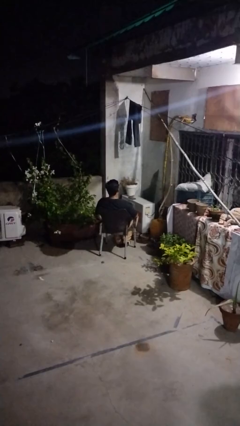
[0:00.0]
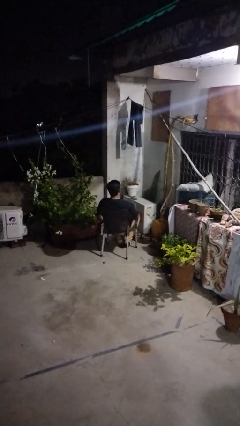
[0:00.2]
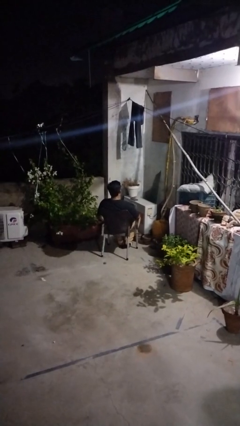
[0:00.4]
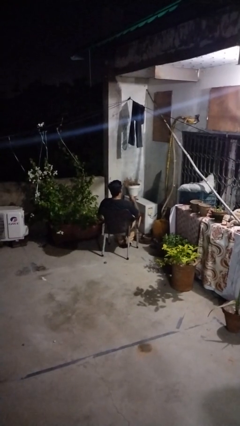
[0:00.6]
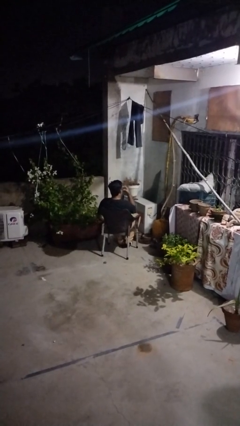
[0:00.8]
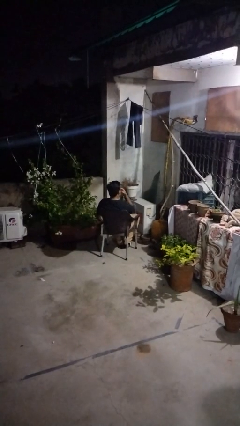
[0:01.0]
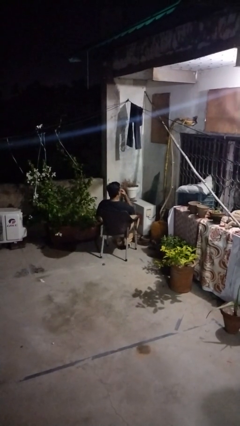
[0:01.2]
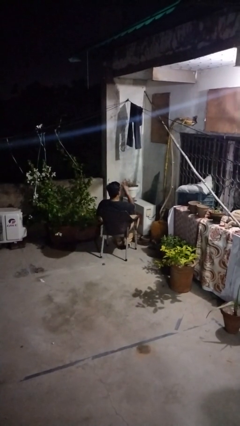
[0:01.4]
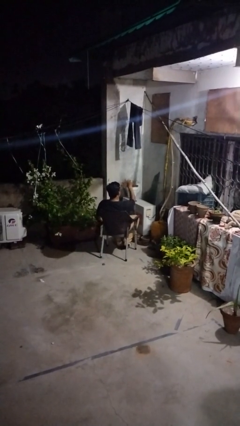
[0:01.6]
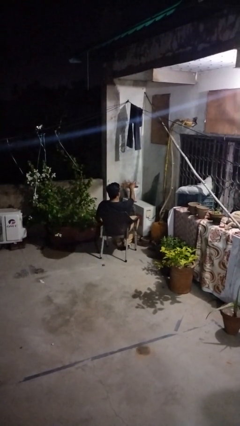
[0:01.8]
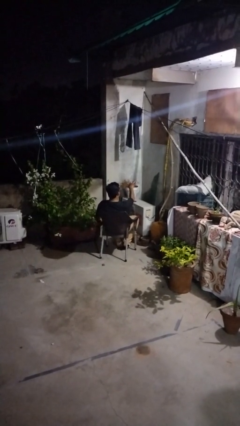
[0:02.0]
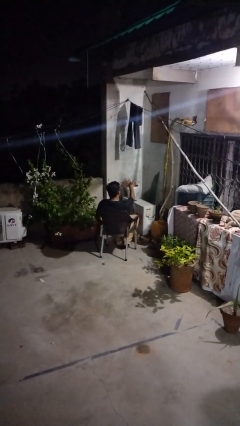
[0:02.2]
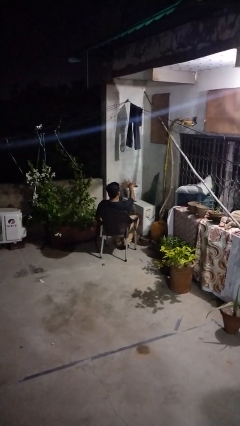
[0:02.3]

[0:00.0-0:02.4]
person gestures watch closely

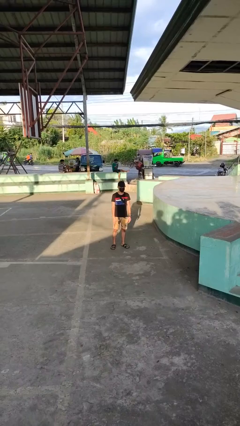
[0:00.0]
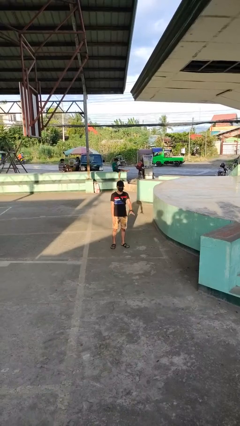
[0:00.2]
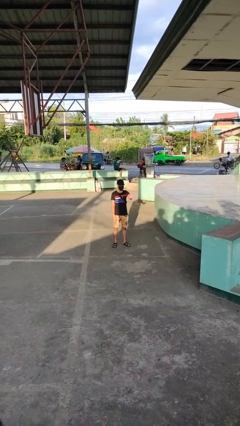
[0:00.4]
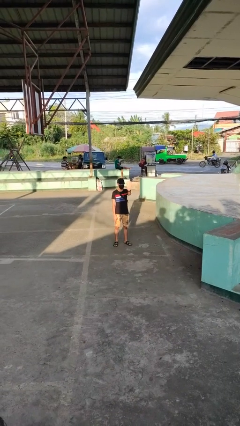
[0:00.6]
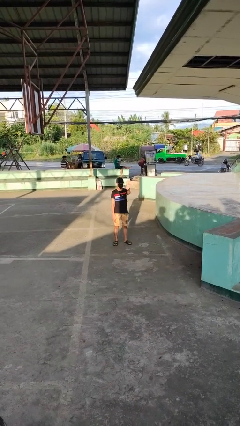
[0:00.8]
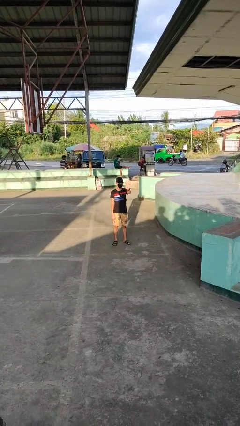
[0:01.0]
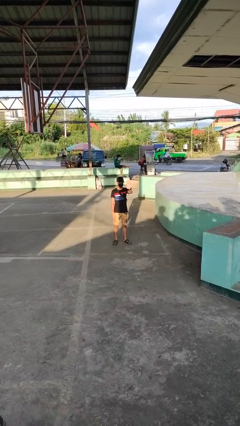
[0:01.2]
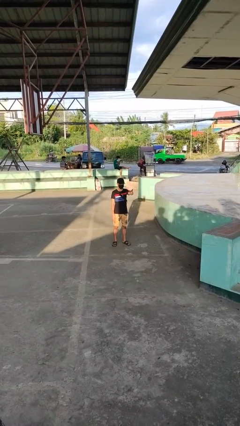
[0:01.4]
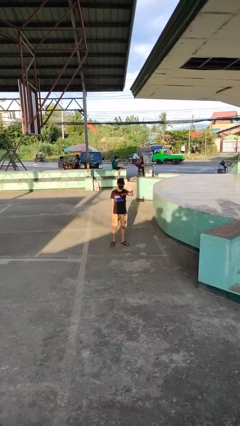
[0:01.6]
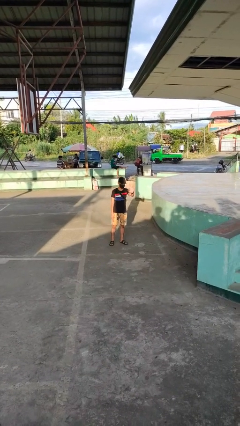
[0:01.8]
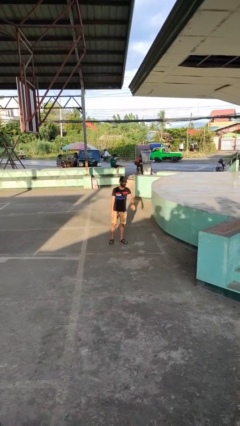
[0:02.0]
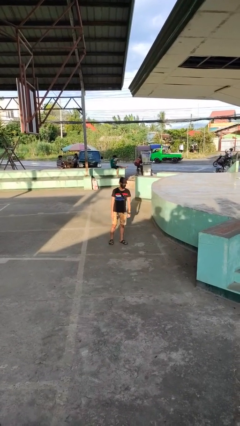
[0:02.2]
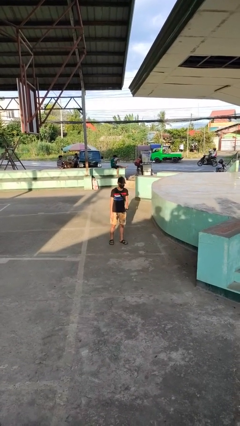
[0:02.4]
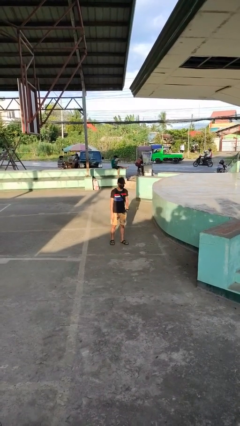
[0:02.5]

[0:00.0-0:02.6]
person waves at person

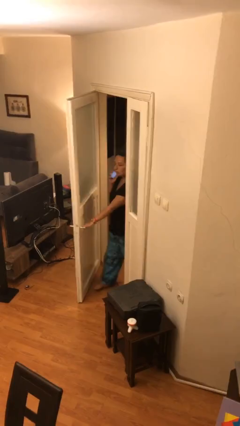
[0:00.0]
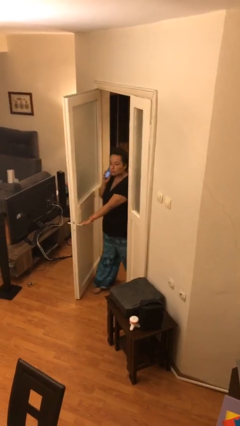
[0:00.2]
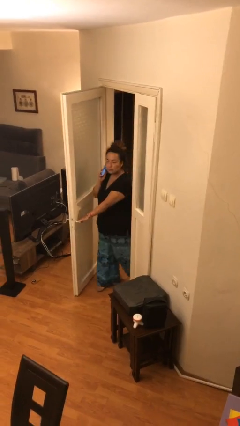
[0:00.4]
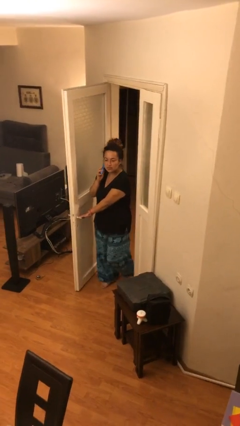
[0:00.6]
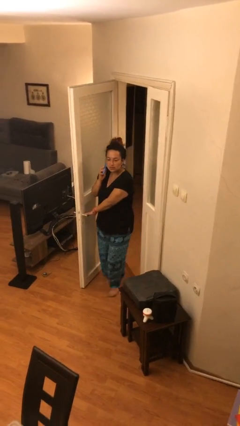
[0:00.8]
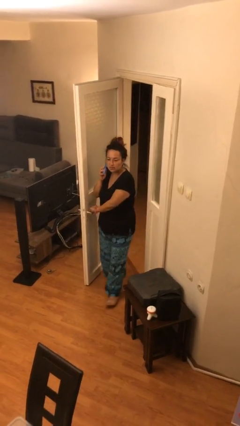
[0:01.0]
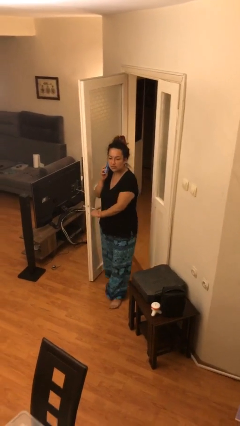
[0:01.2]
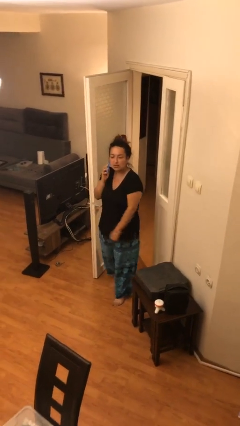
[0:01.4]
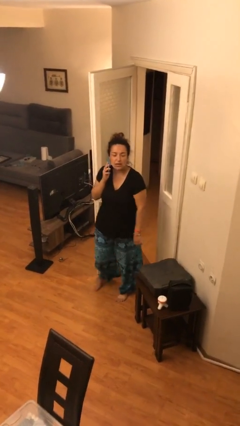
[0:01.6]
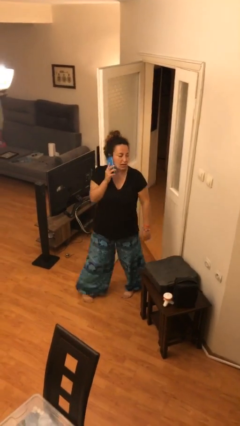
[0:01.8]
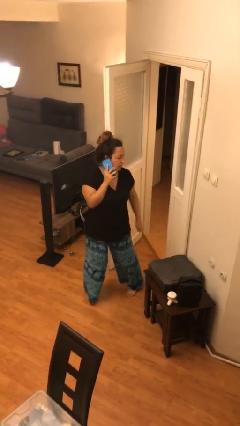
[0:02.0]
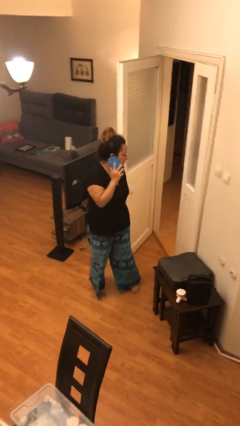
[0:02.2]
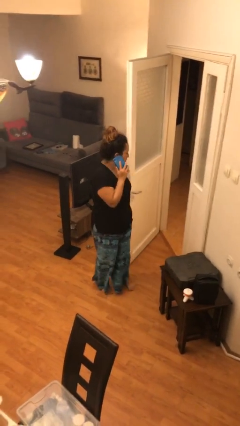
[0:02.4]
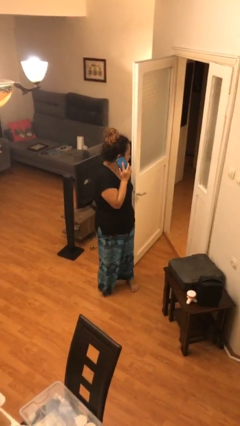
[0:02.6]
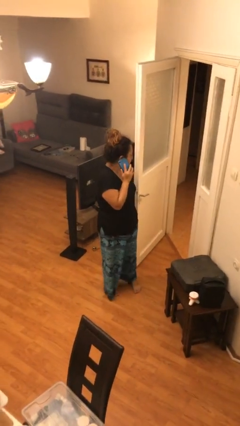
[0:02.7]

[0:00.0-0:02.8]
person enters scene through structure

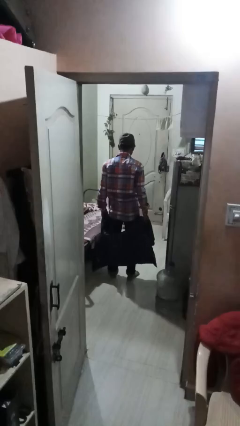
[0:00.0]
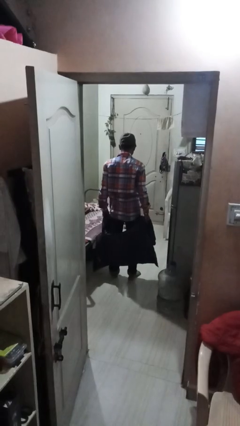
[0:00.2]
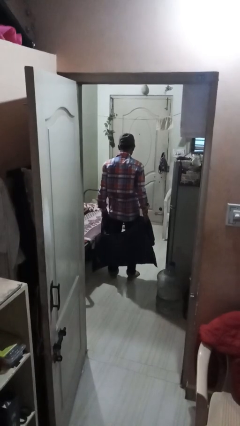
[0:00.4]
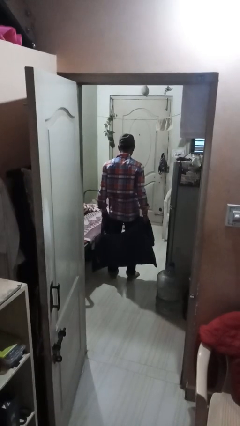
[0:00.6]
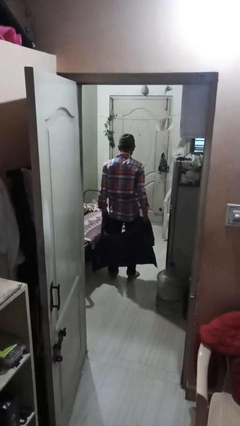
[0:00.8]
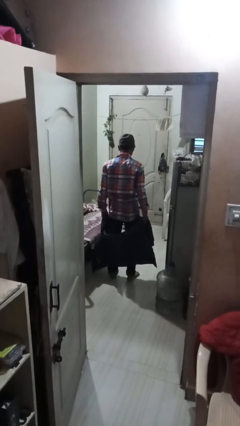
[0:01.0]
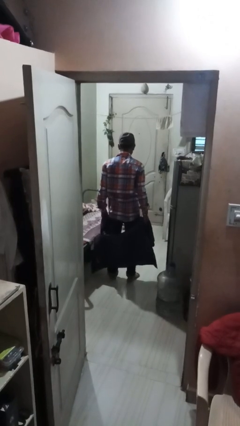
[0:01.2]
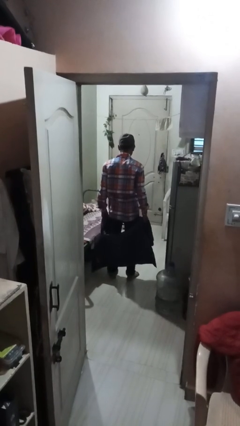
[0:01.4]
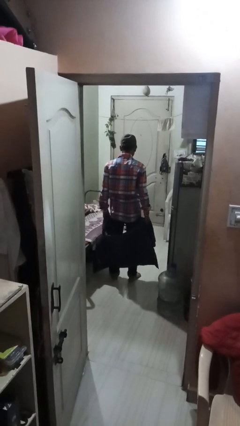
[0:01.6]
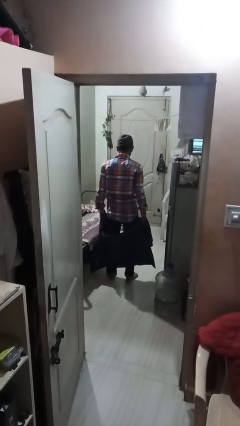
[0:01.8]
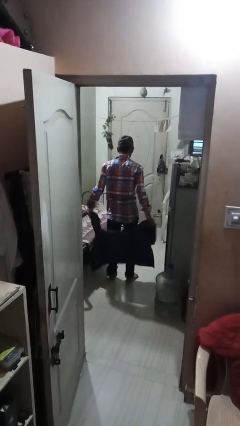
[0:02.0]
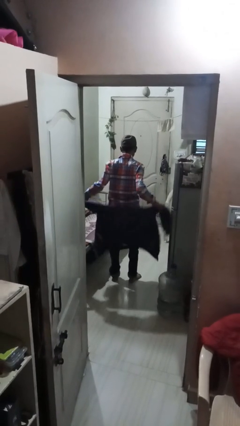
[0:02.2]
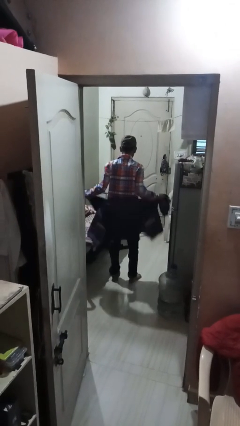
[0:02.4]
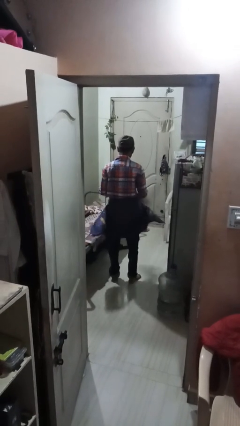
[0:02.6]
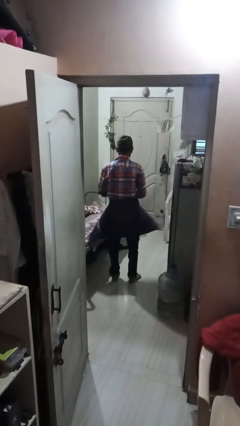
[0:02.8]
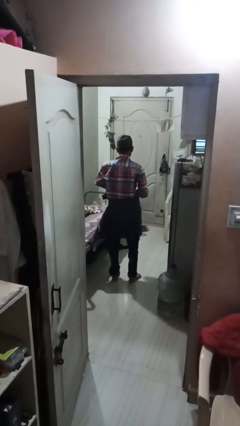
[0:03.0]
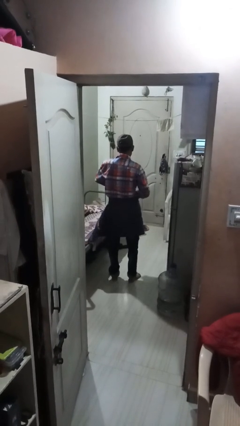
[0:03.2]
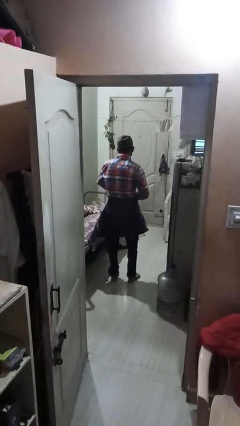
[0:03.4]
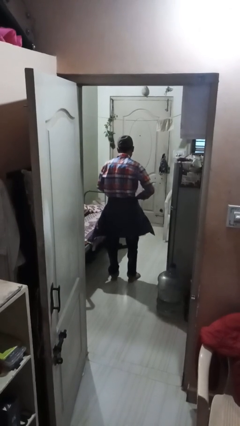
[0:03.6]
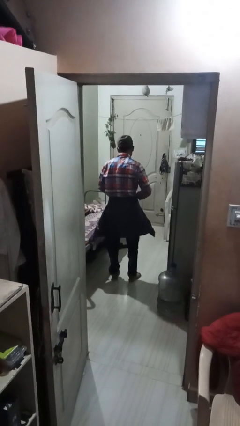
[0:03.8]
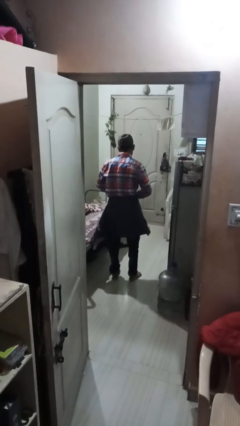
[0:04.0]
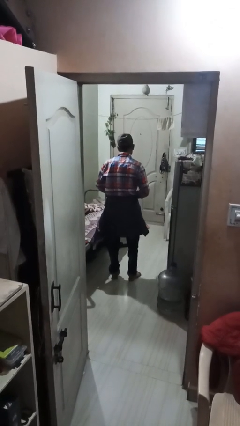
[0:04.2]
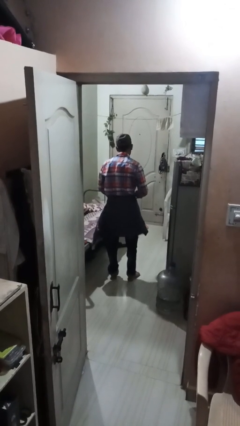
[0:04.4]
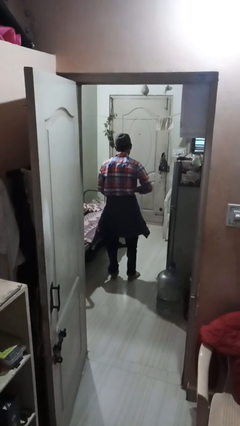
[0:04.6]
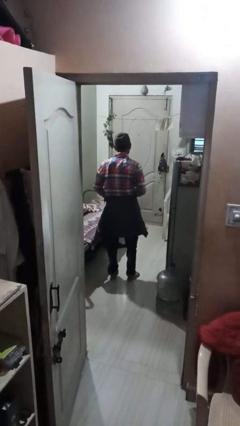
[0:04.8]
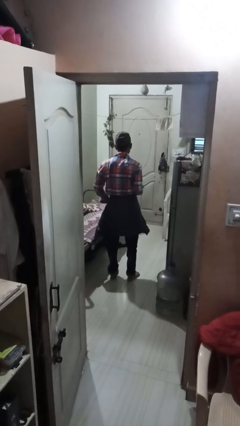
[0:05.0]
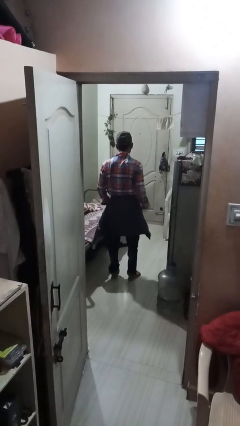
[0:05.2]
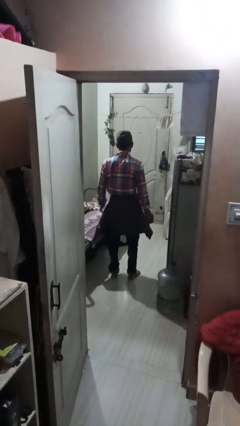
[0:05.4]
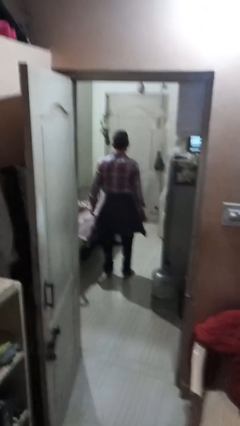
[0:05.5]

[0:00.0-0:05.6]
person ties jacket around waist

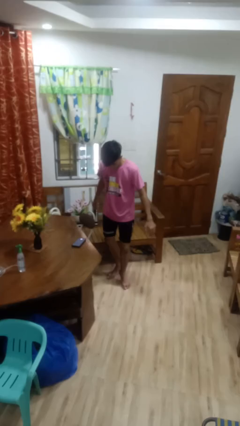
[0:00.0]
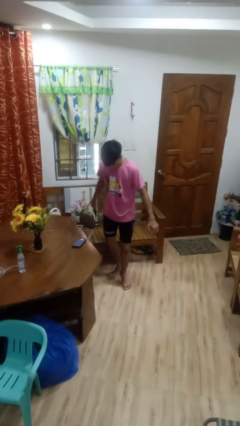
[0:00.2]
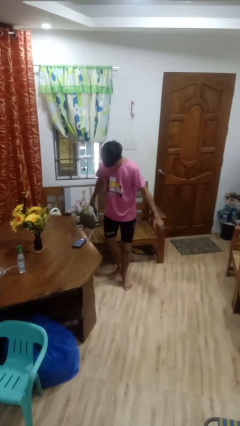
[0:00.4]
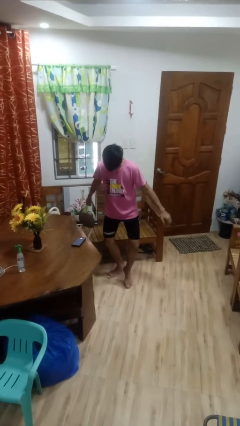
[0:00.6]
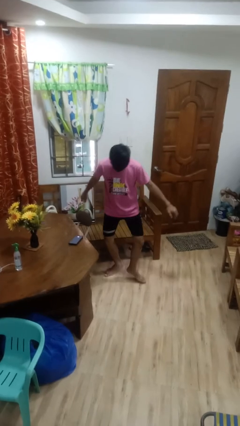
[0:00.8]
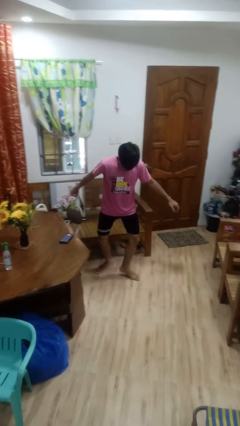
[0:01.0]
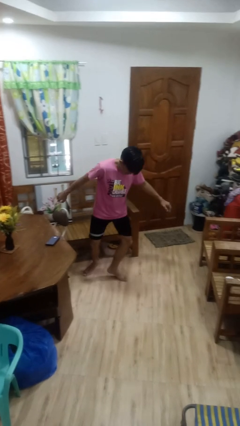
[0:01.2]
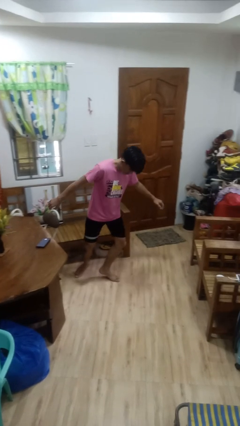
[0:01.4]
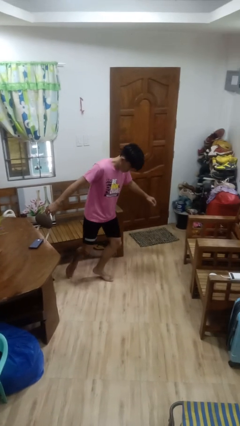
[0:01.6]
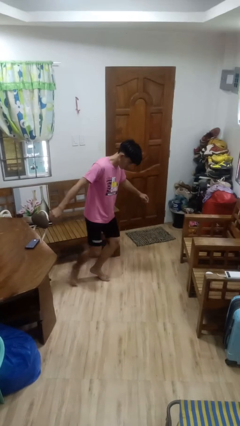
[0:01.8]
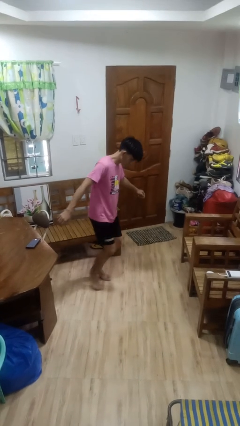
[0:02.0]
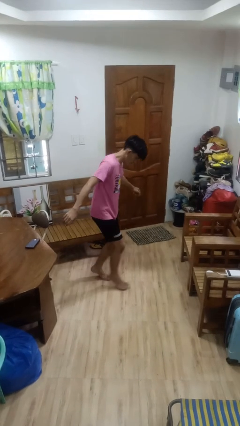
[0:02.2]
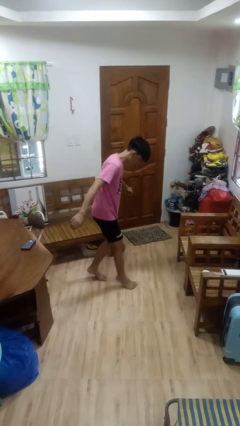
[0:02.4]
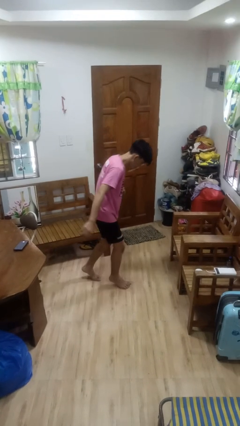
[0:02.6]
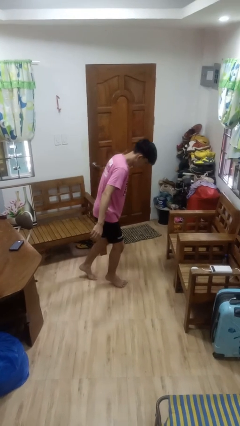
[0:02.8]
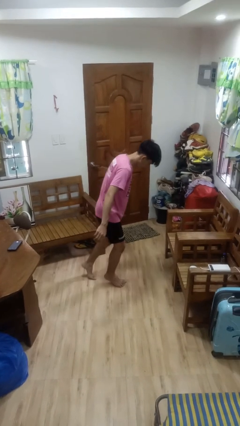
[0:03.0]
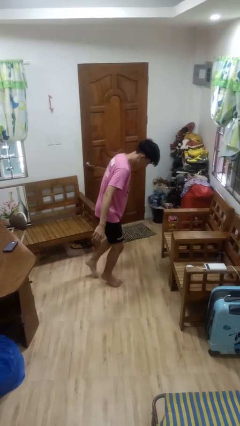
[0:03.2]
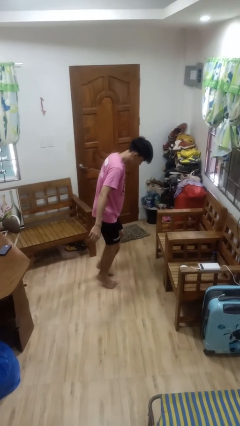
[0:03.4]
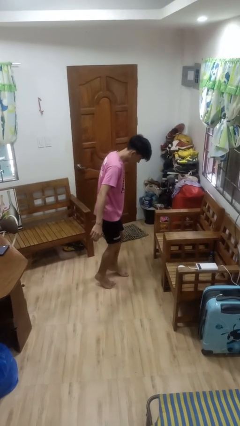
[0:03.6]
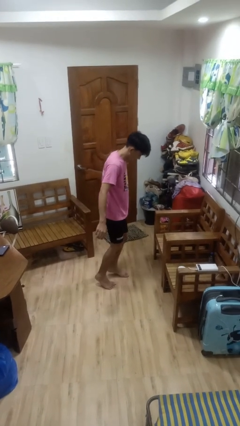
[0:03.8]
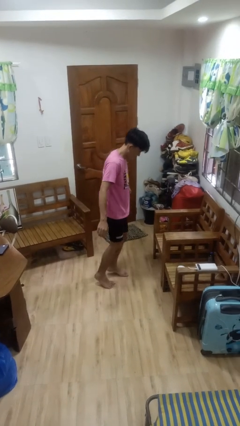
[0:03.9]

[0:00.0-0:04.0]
person walks tiptoe

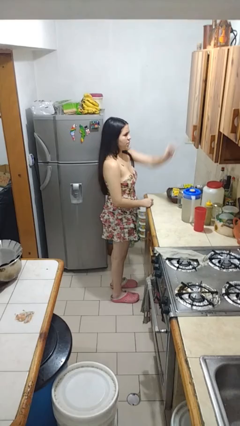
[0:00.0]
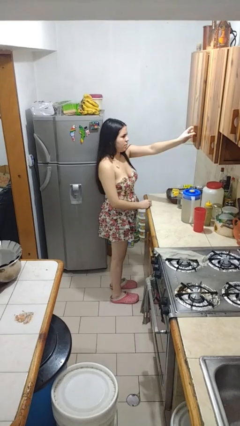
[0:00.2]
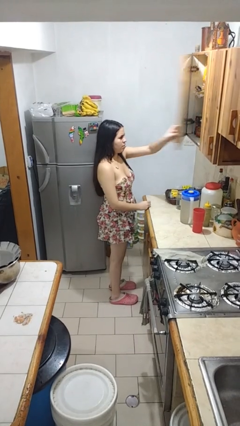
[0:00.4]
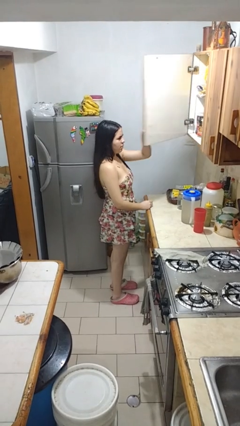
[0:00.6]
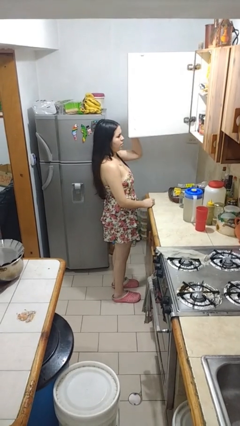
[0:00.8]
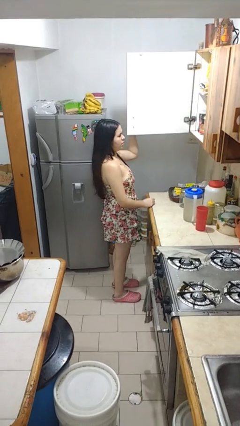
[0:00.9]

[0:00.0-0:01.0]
person opens cabinet
